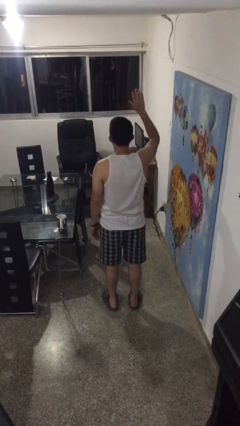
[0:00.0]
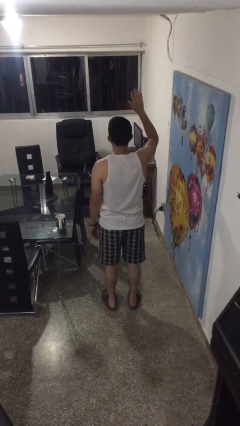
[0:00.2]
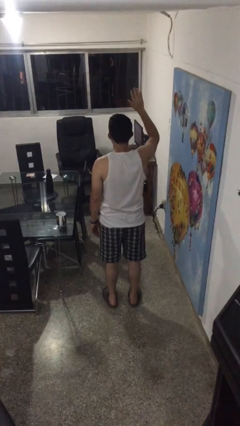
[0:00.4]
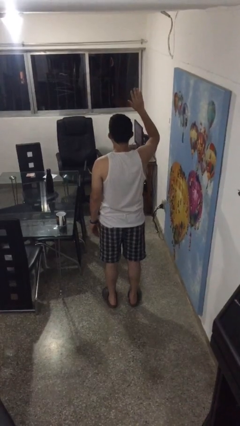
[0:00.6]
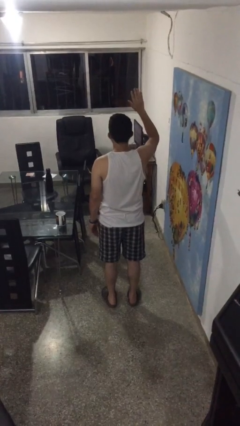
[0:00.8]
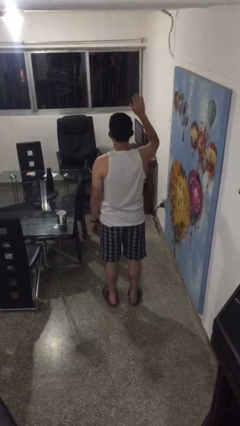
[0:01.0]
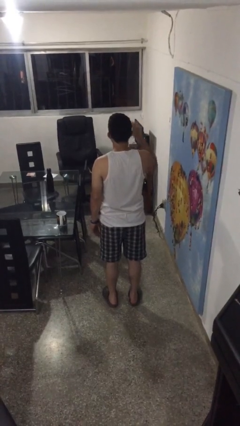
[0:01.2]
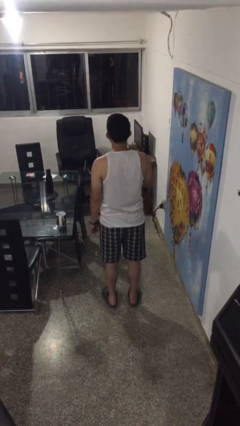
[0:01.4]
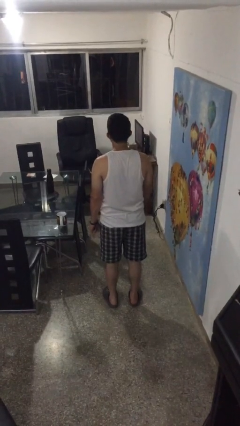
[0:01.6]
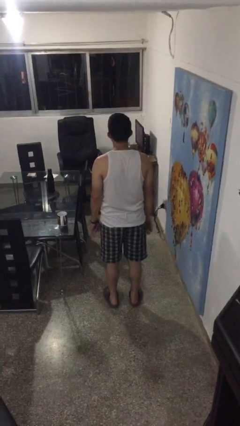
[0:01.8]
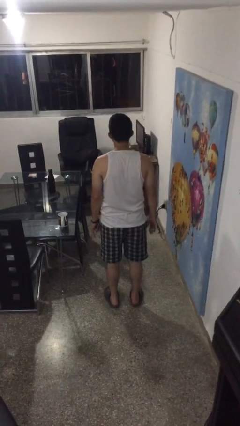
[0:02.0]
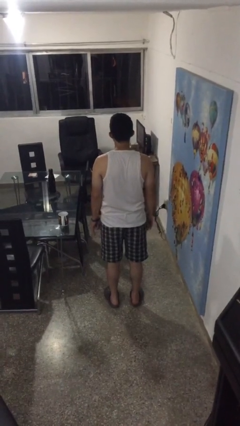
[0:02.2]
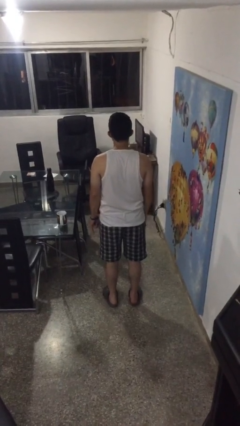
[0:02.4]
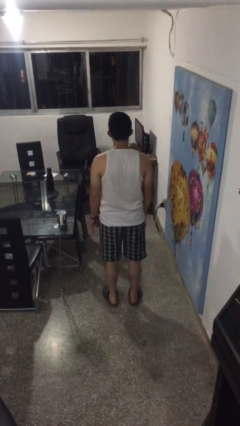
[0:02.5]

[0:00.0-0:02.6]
person gestures lower hand

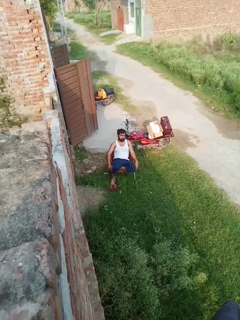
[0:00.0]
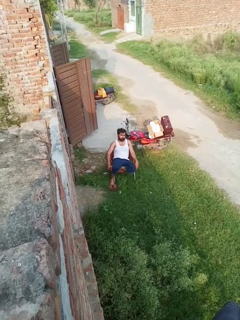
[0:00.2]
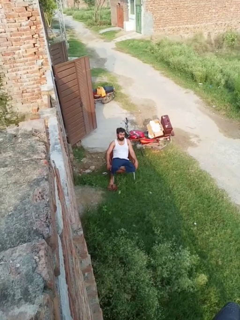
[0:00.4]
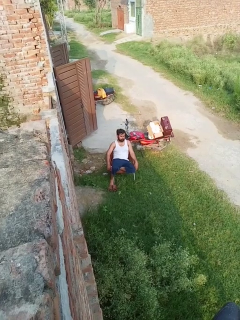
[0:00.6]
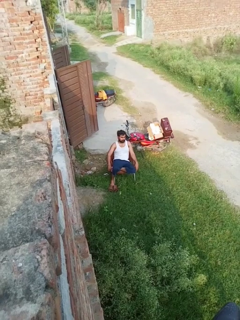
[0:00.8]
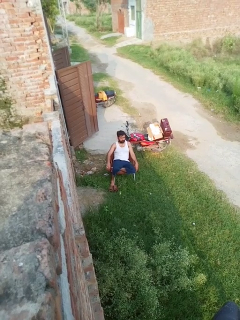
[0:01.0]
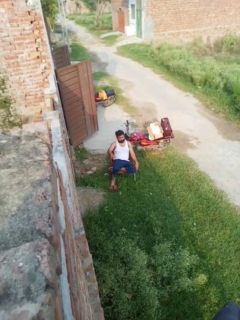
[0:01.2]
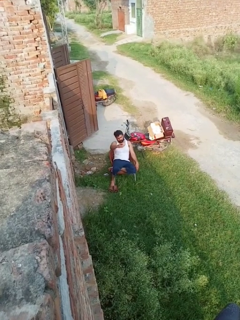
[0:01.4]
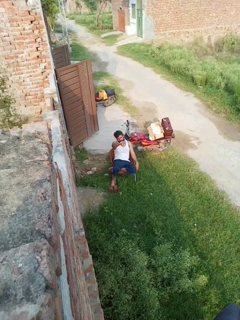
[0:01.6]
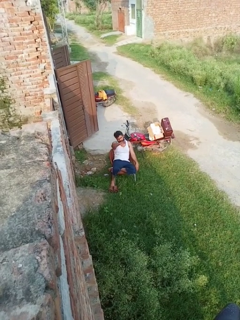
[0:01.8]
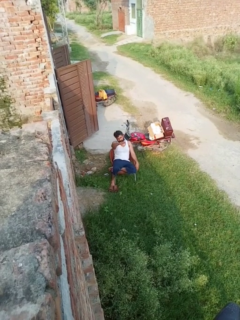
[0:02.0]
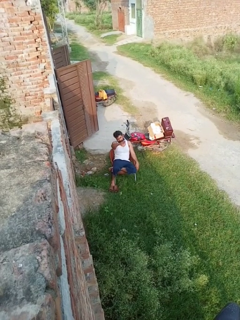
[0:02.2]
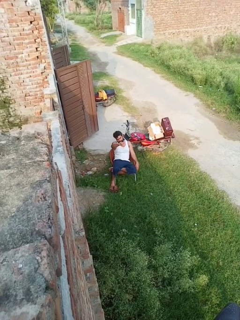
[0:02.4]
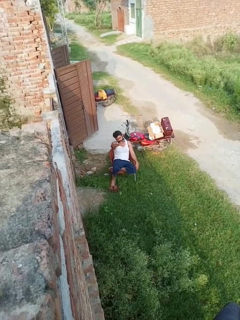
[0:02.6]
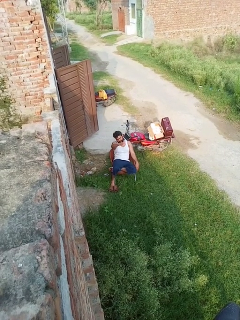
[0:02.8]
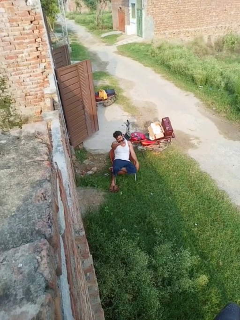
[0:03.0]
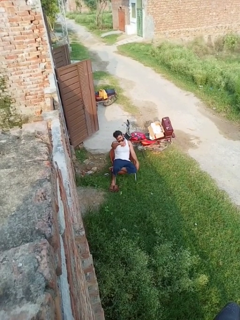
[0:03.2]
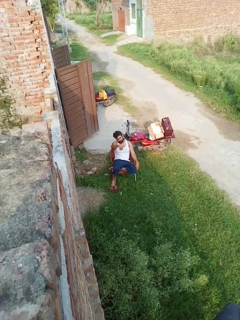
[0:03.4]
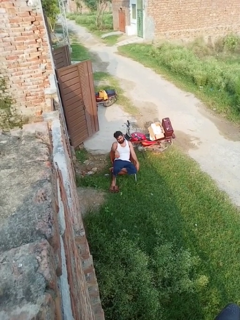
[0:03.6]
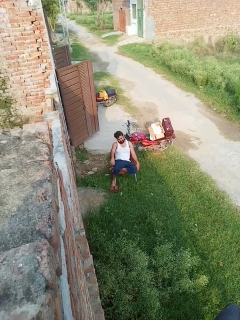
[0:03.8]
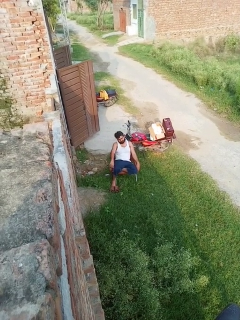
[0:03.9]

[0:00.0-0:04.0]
person gestures come here

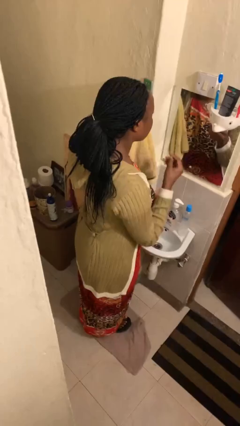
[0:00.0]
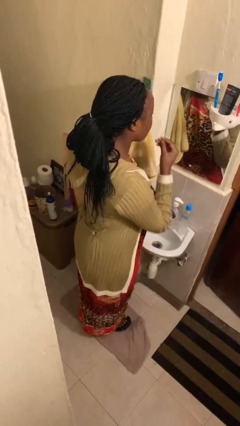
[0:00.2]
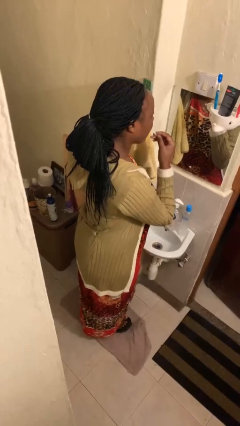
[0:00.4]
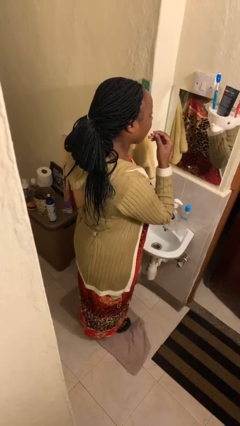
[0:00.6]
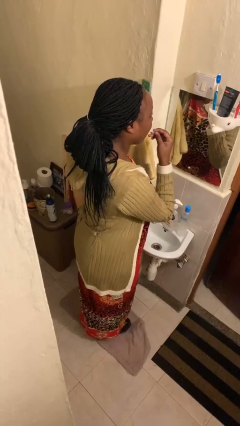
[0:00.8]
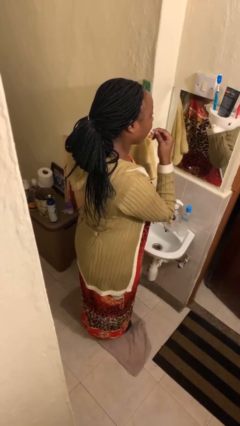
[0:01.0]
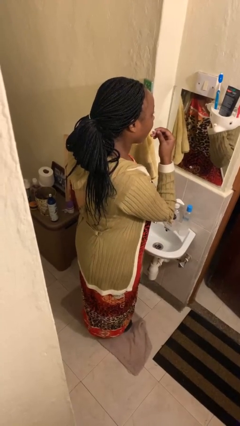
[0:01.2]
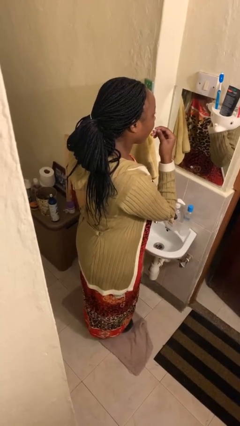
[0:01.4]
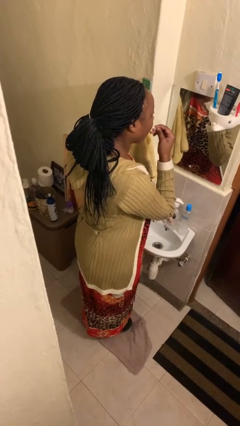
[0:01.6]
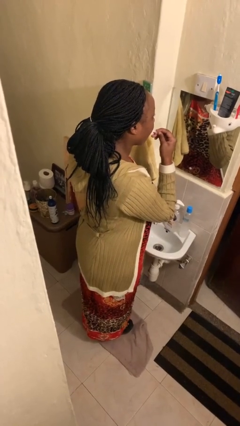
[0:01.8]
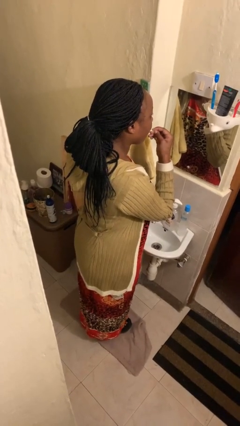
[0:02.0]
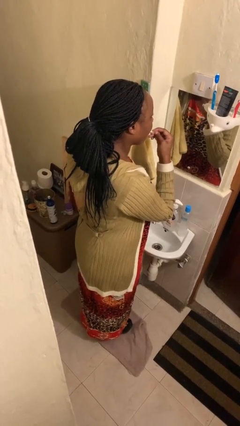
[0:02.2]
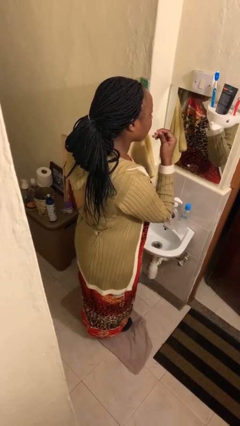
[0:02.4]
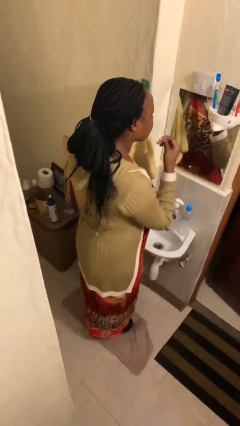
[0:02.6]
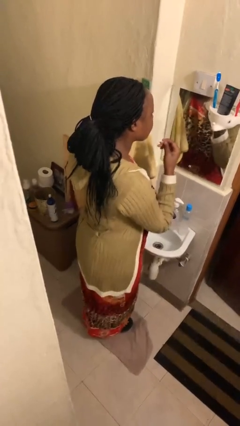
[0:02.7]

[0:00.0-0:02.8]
person flosses

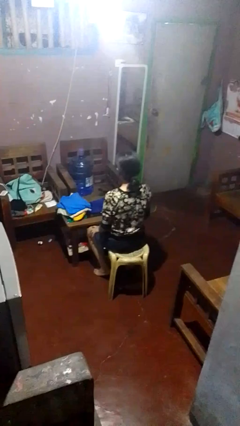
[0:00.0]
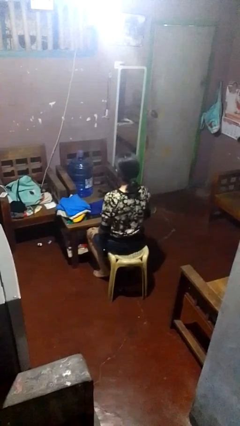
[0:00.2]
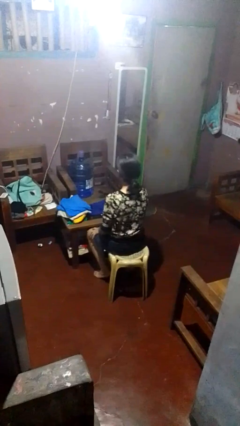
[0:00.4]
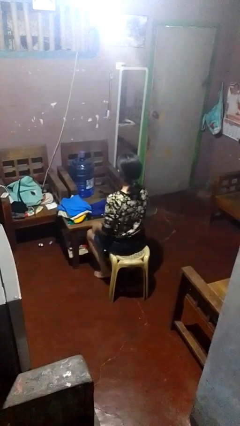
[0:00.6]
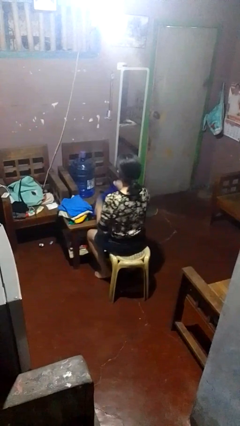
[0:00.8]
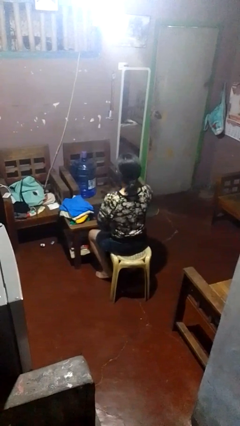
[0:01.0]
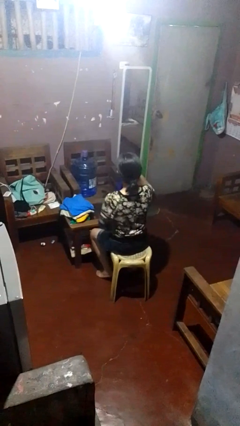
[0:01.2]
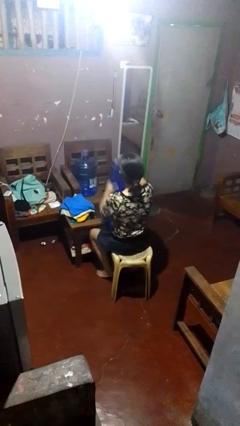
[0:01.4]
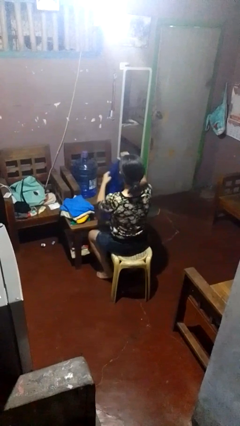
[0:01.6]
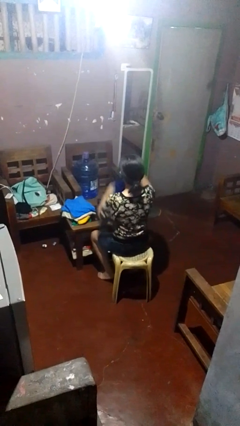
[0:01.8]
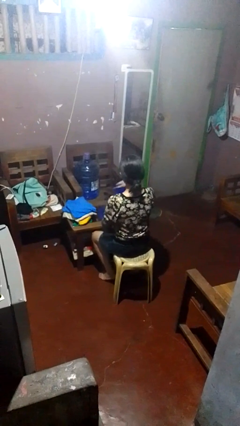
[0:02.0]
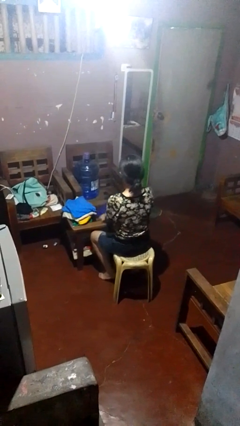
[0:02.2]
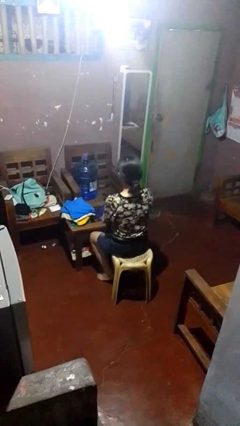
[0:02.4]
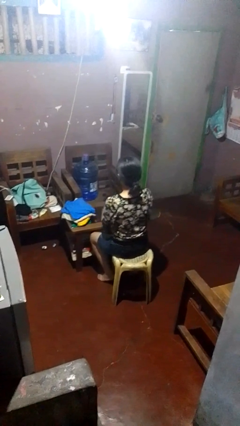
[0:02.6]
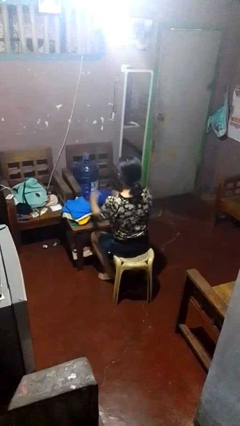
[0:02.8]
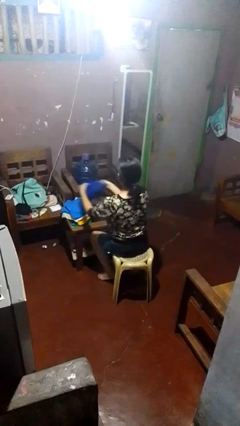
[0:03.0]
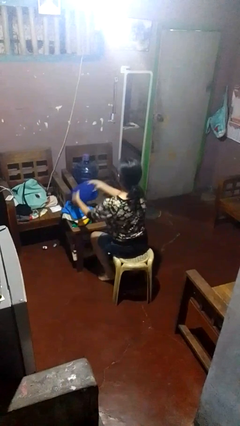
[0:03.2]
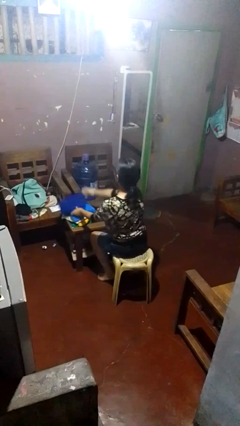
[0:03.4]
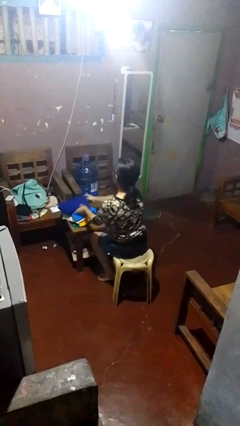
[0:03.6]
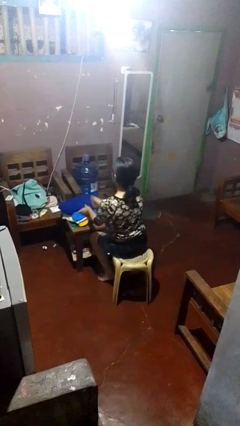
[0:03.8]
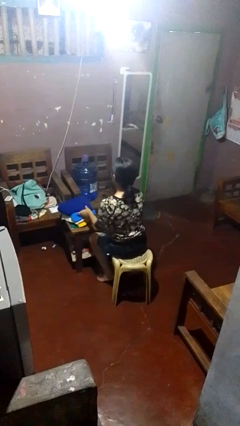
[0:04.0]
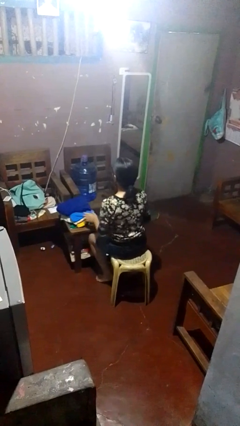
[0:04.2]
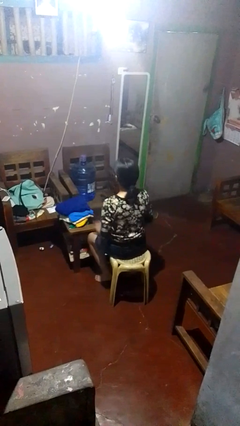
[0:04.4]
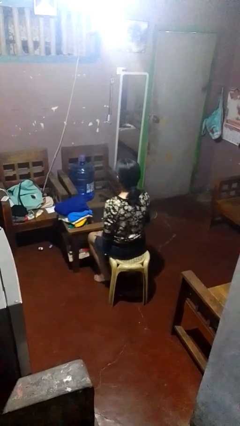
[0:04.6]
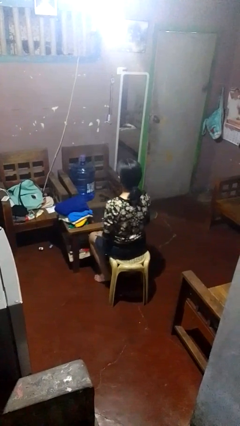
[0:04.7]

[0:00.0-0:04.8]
person folds shirt

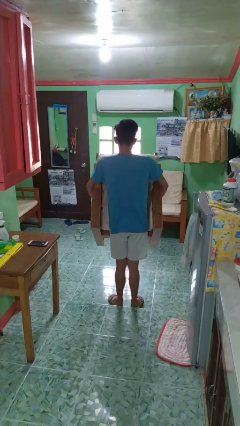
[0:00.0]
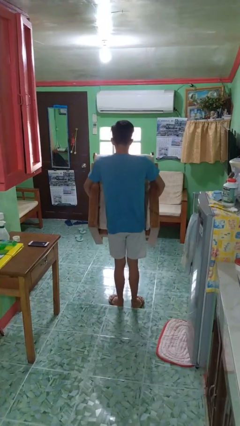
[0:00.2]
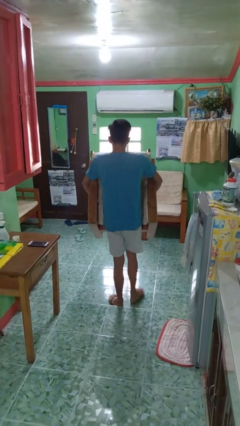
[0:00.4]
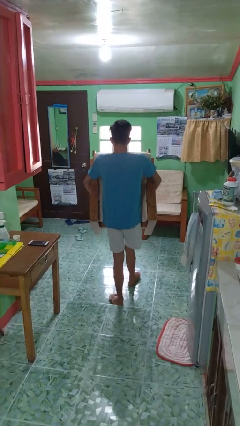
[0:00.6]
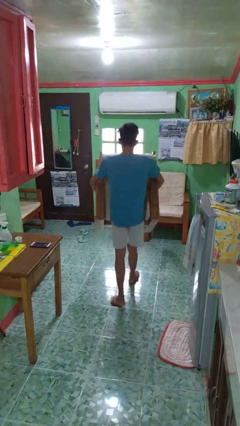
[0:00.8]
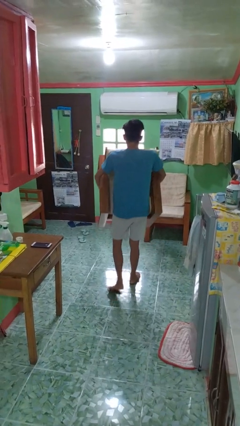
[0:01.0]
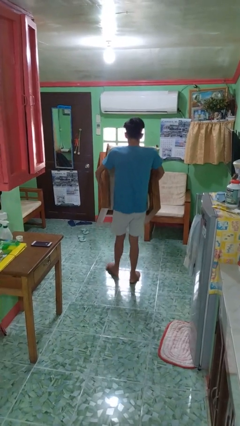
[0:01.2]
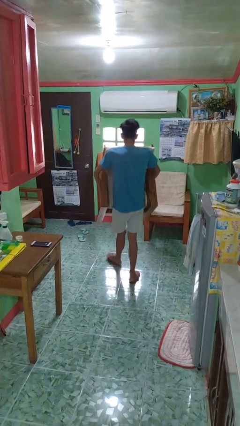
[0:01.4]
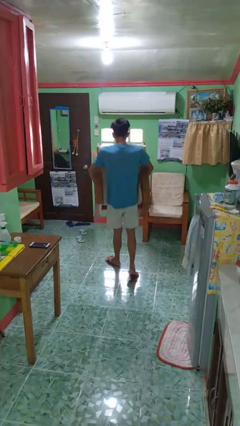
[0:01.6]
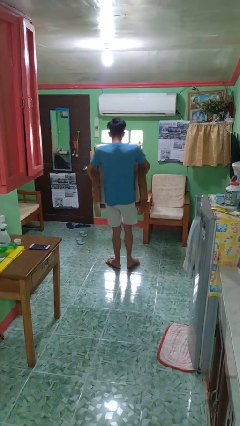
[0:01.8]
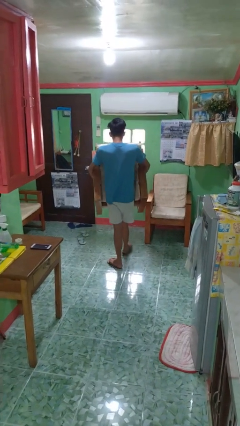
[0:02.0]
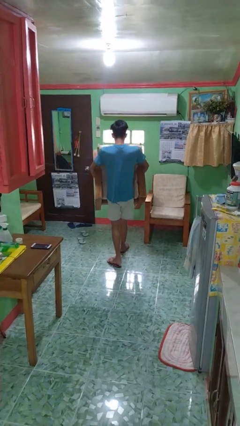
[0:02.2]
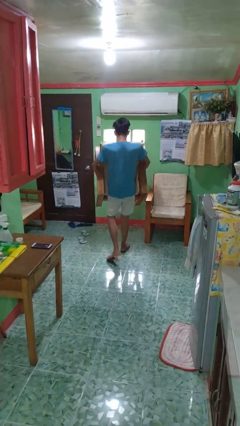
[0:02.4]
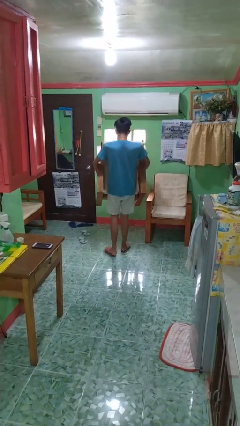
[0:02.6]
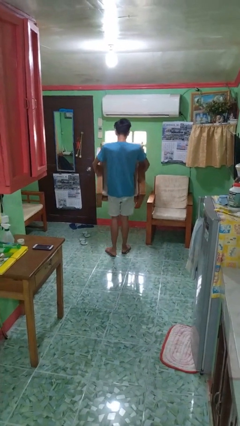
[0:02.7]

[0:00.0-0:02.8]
person carries furniture

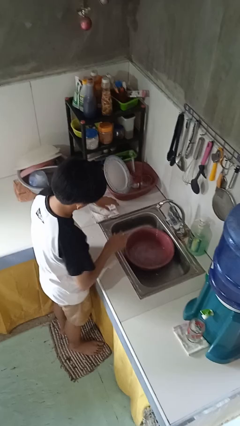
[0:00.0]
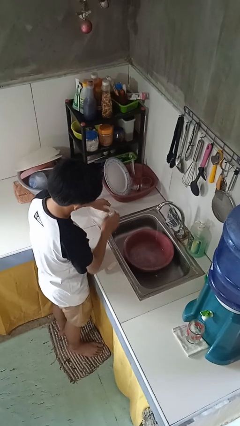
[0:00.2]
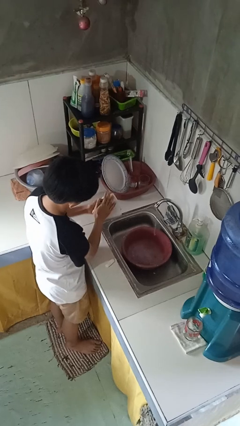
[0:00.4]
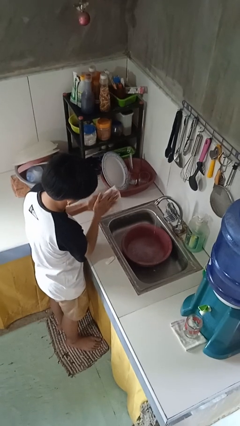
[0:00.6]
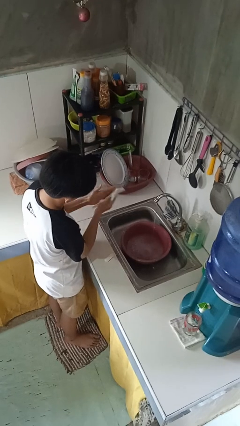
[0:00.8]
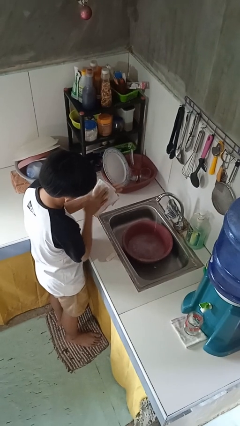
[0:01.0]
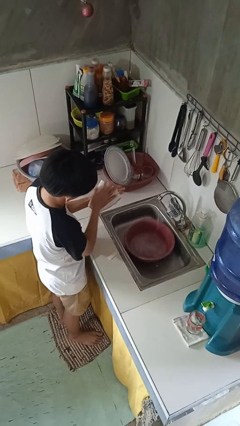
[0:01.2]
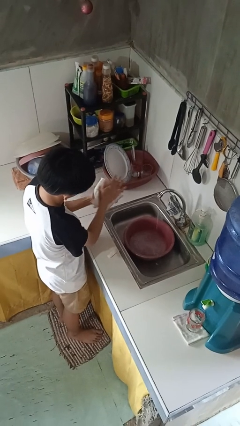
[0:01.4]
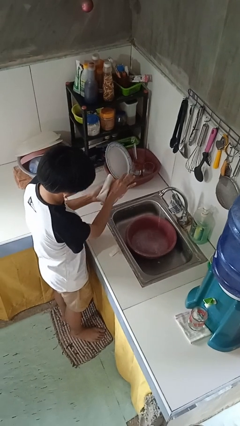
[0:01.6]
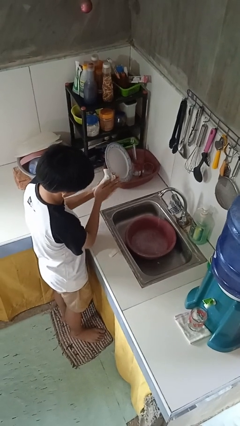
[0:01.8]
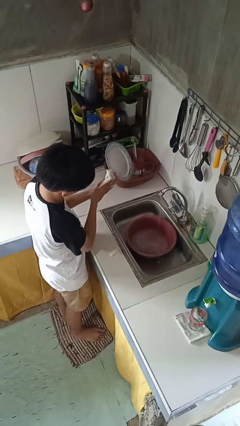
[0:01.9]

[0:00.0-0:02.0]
person dries hands with towel
